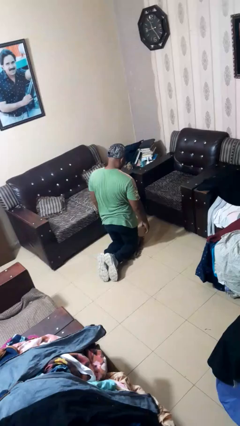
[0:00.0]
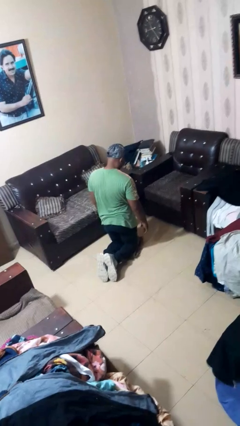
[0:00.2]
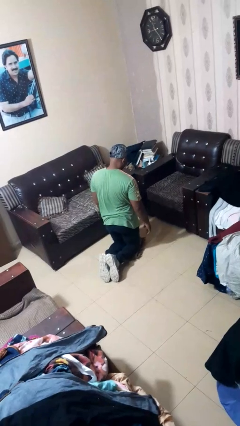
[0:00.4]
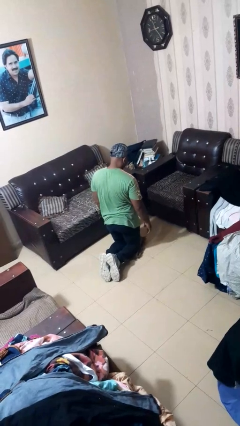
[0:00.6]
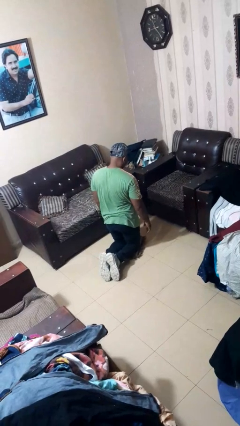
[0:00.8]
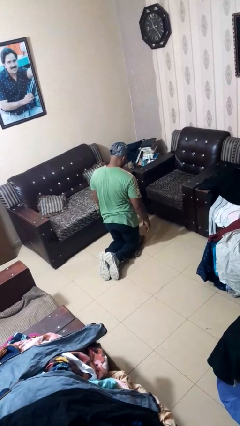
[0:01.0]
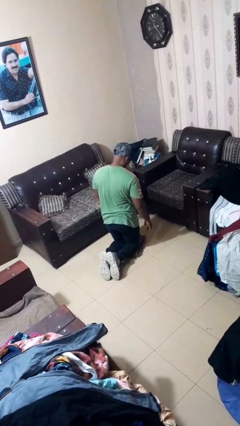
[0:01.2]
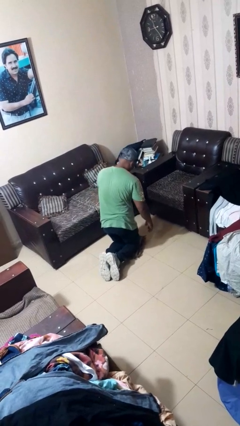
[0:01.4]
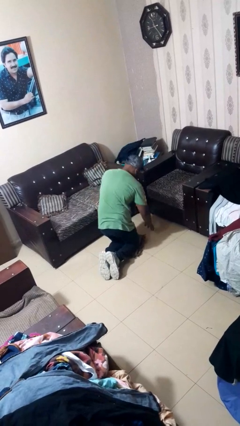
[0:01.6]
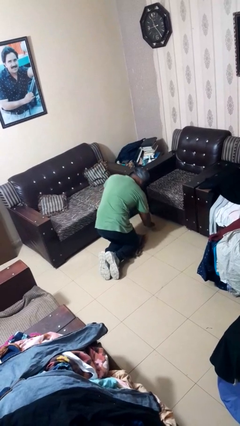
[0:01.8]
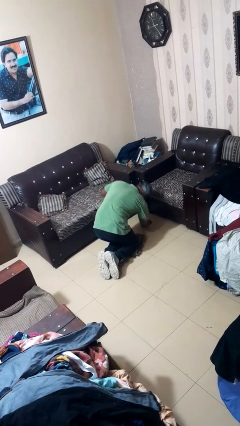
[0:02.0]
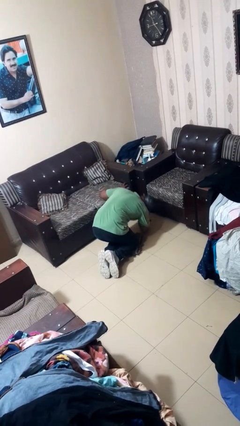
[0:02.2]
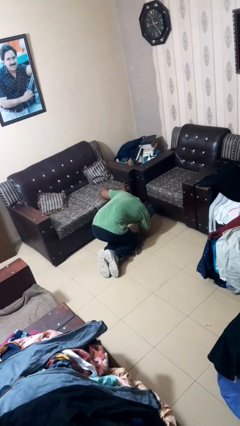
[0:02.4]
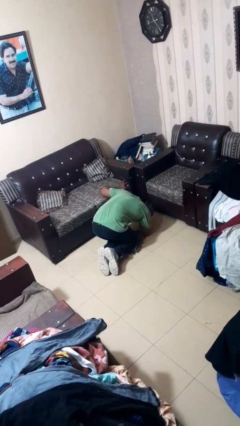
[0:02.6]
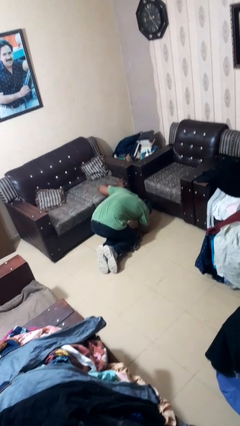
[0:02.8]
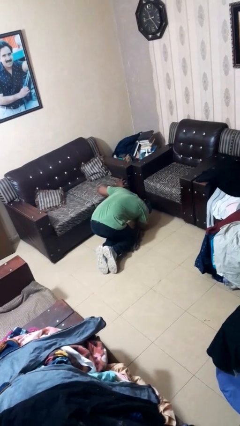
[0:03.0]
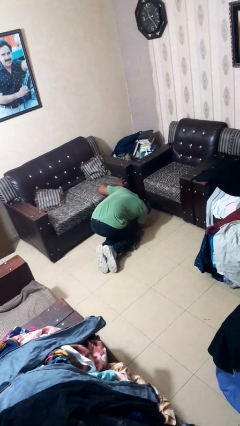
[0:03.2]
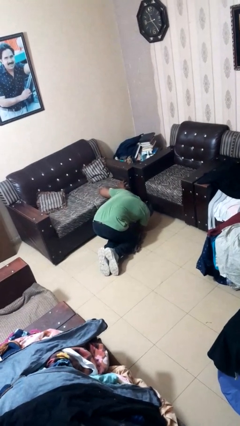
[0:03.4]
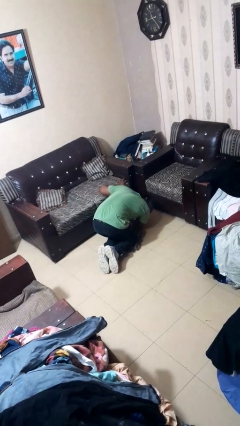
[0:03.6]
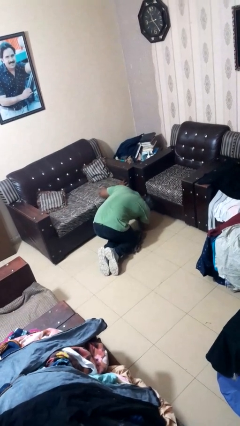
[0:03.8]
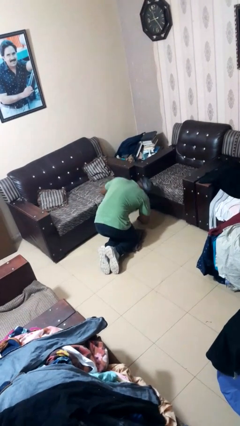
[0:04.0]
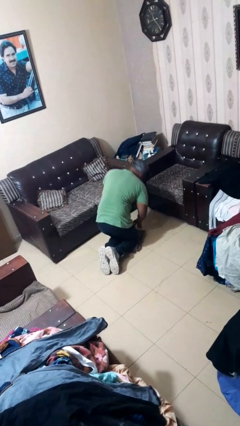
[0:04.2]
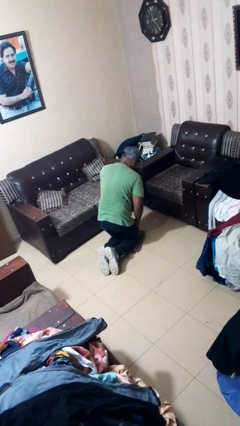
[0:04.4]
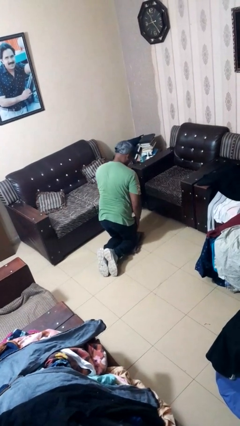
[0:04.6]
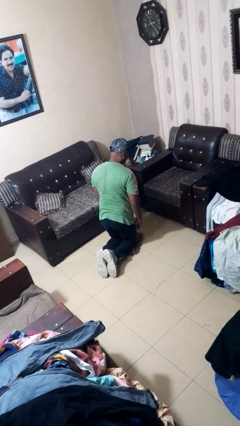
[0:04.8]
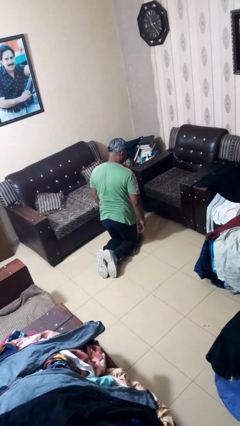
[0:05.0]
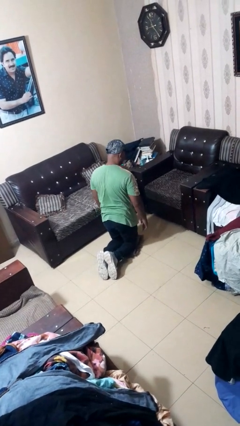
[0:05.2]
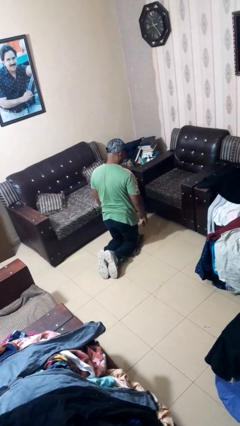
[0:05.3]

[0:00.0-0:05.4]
person searches under couch

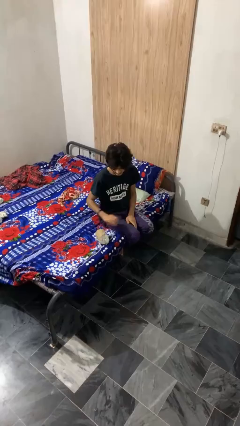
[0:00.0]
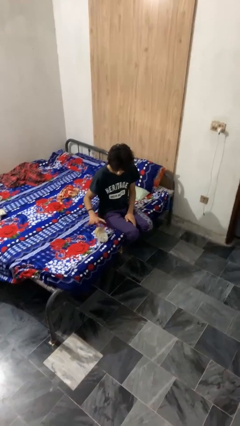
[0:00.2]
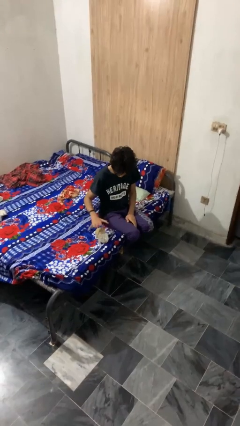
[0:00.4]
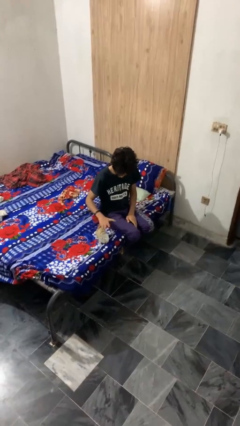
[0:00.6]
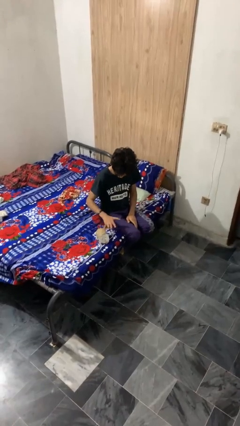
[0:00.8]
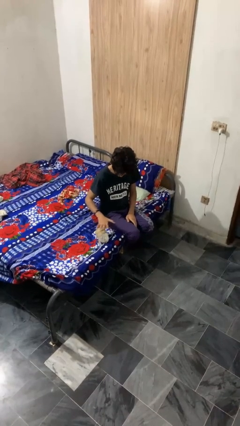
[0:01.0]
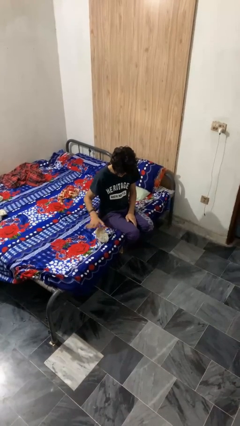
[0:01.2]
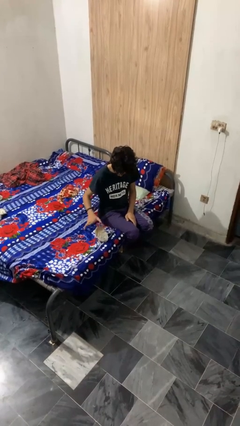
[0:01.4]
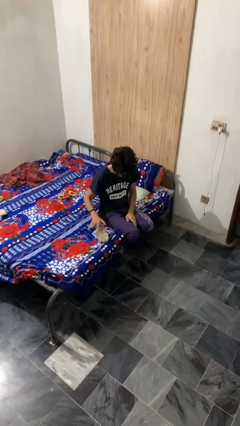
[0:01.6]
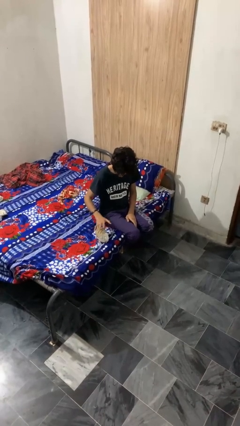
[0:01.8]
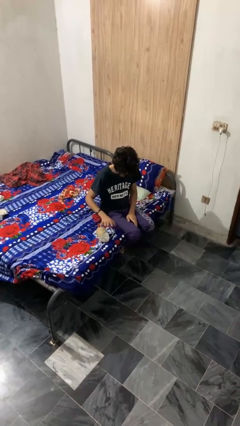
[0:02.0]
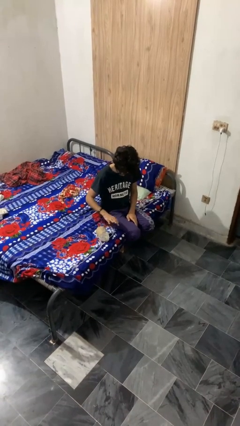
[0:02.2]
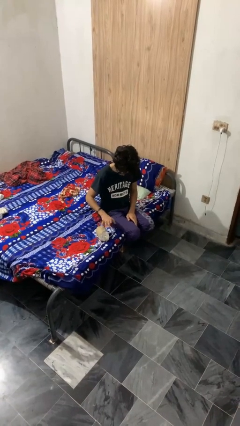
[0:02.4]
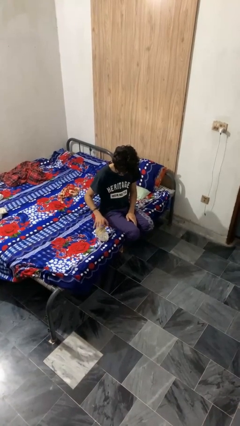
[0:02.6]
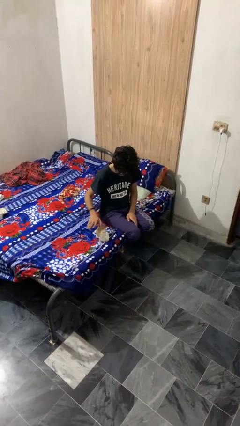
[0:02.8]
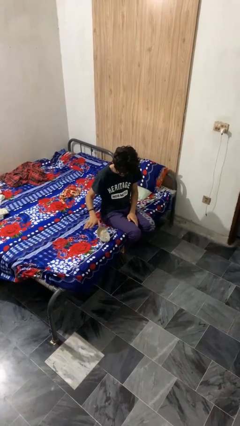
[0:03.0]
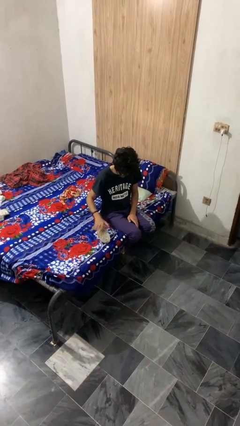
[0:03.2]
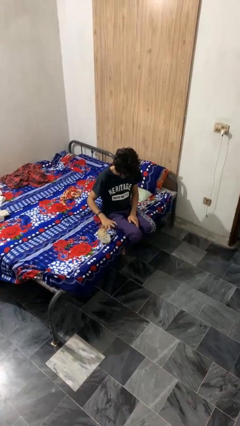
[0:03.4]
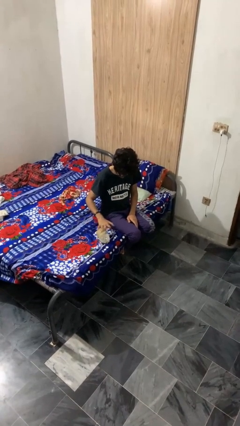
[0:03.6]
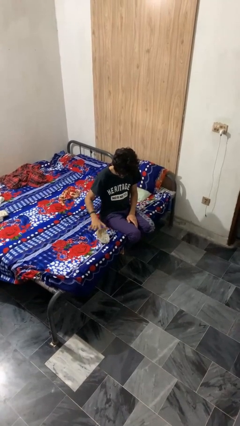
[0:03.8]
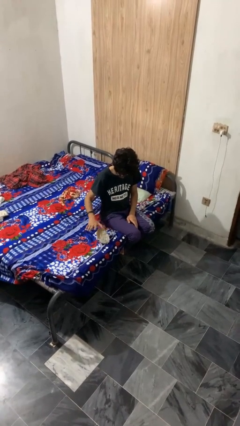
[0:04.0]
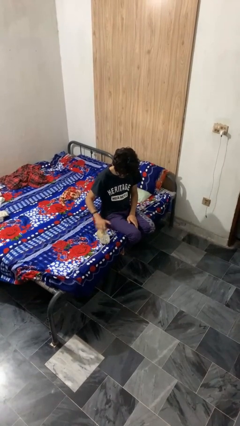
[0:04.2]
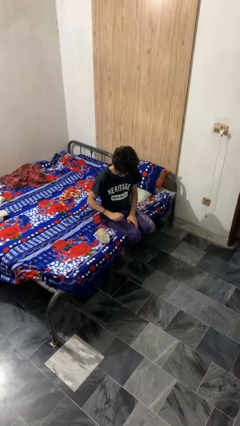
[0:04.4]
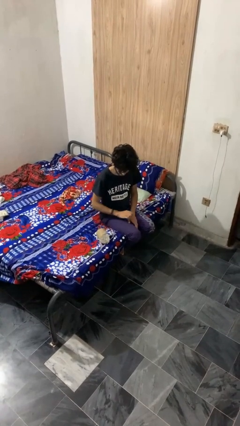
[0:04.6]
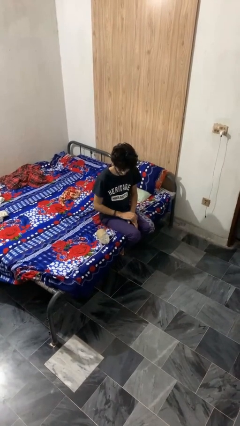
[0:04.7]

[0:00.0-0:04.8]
person waves hand over object

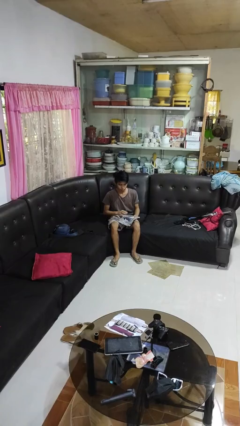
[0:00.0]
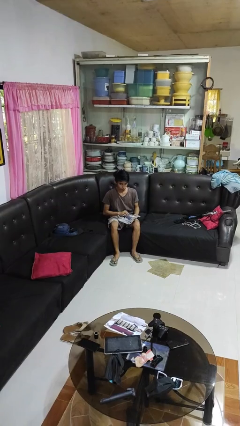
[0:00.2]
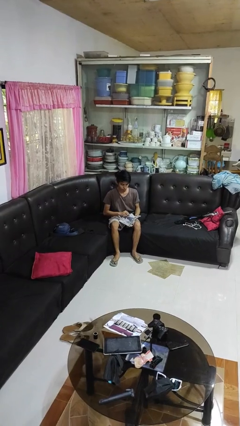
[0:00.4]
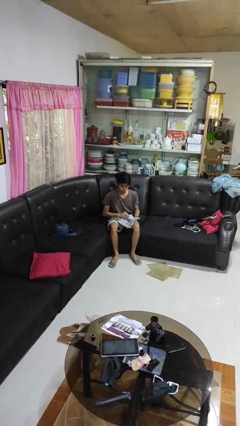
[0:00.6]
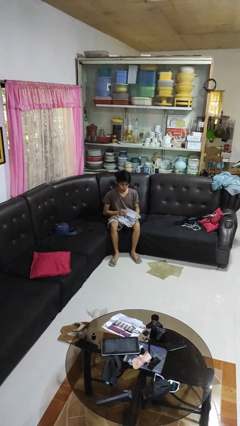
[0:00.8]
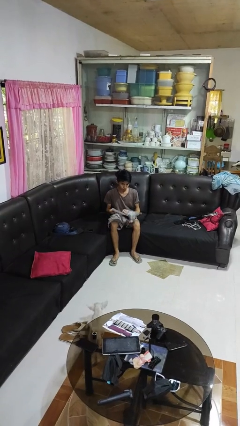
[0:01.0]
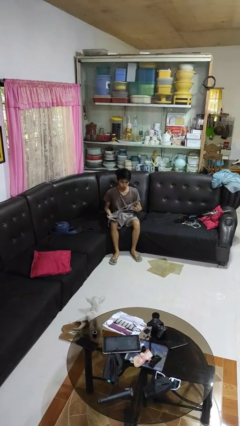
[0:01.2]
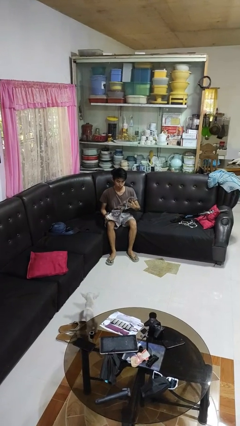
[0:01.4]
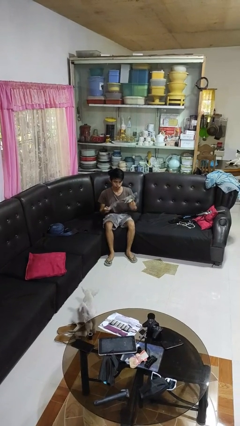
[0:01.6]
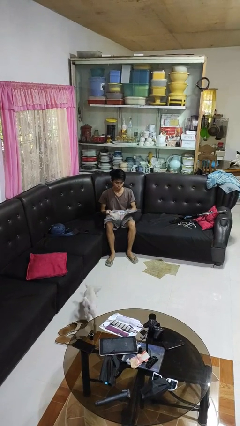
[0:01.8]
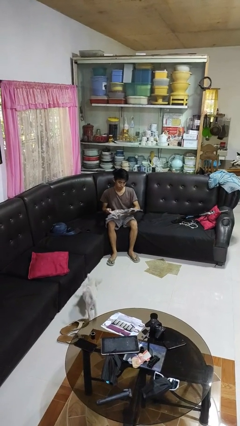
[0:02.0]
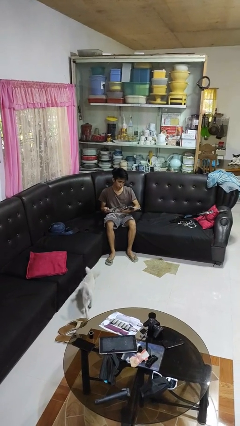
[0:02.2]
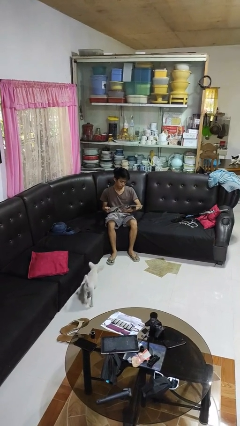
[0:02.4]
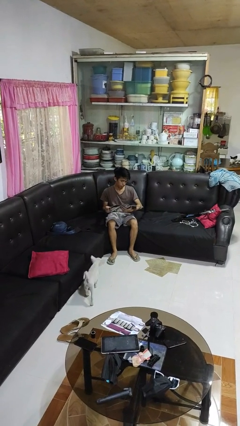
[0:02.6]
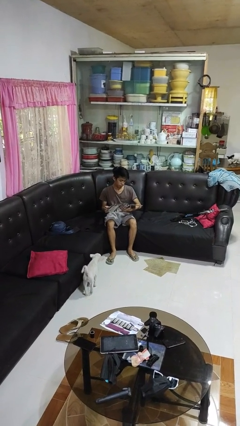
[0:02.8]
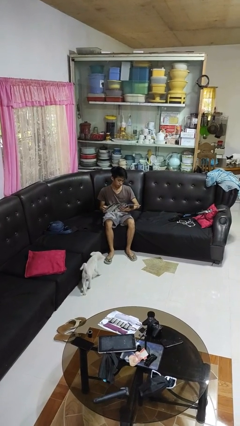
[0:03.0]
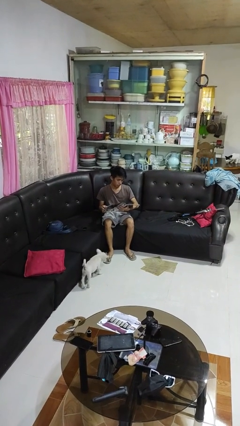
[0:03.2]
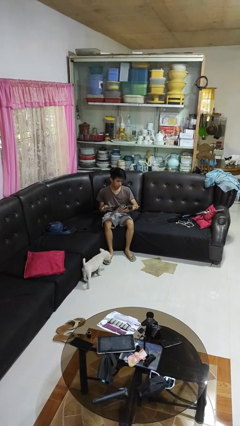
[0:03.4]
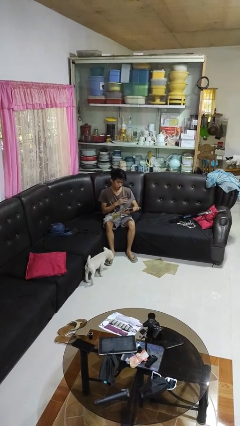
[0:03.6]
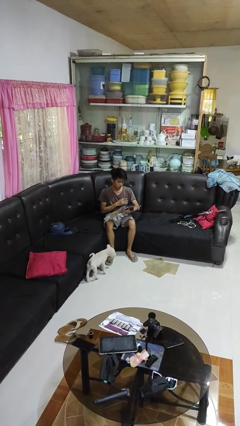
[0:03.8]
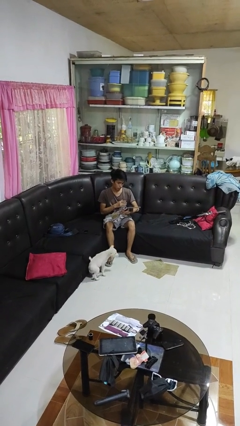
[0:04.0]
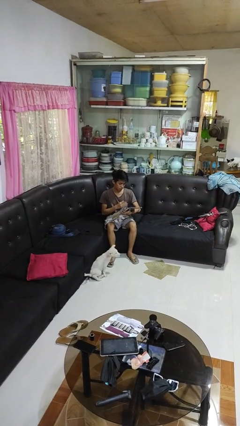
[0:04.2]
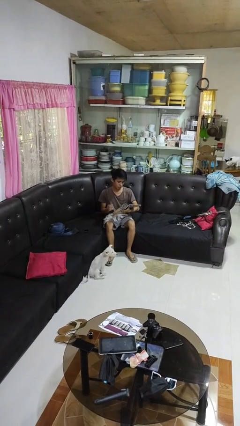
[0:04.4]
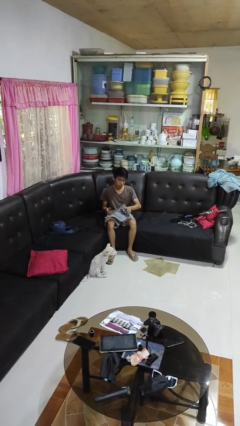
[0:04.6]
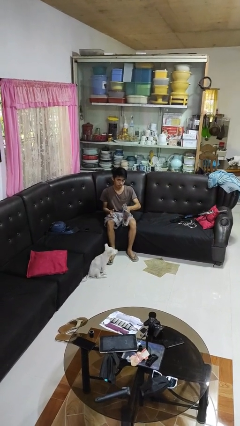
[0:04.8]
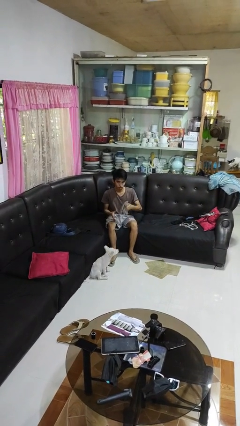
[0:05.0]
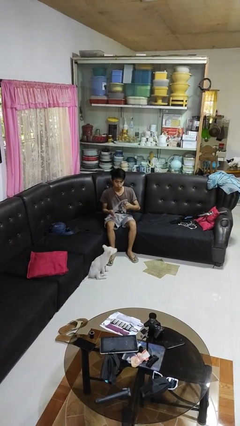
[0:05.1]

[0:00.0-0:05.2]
person reads magazine

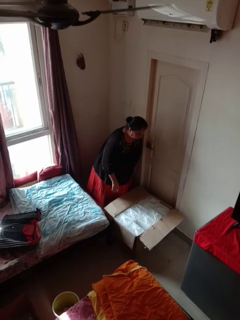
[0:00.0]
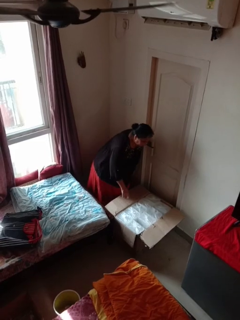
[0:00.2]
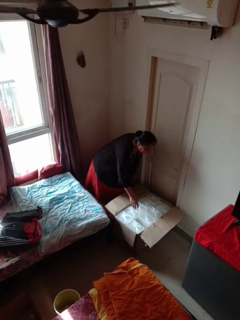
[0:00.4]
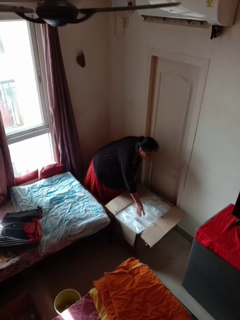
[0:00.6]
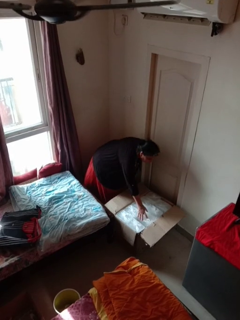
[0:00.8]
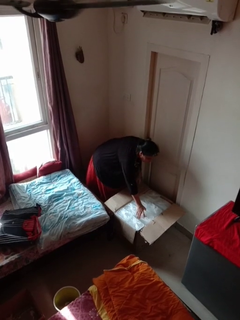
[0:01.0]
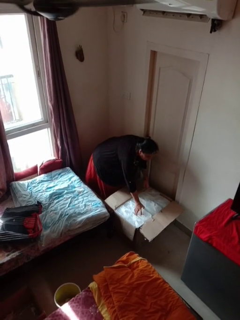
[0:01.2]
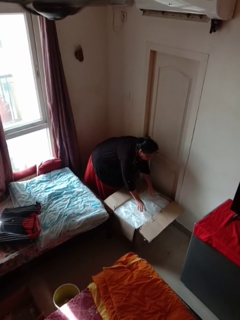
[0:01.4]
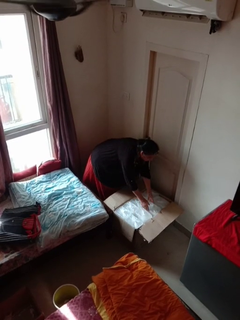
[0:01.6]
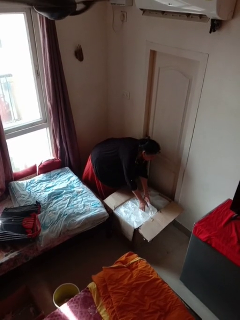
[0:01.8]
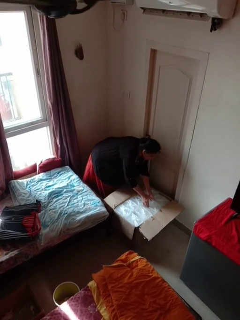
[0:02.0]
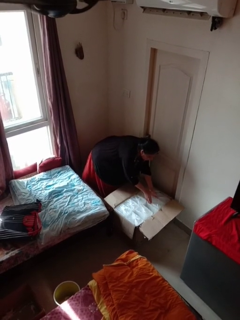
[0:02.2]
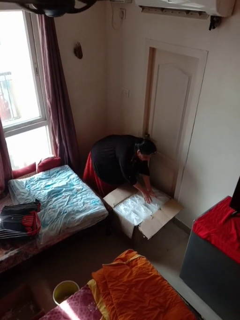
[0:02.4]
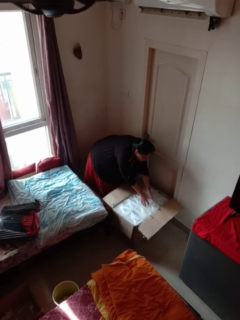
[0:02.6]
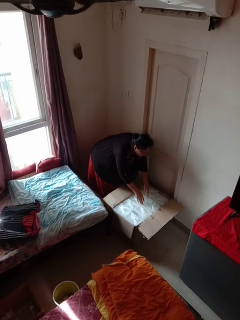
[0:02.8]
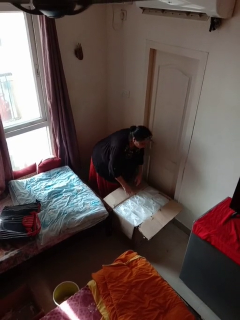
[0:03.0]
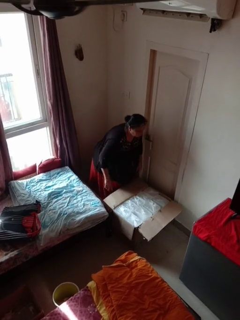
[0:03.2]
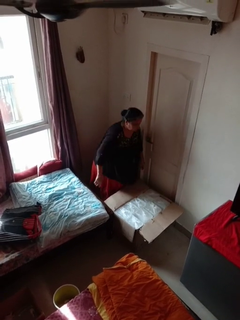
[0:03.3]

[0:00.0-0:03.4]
person searches in box
